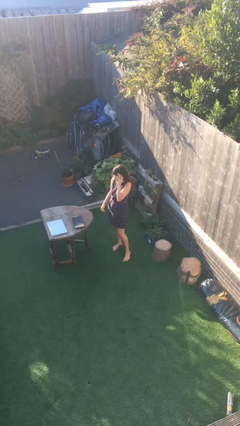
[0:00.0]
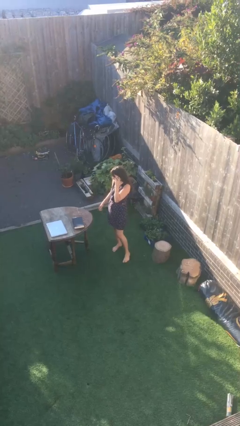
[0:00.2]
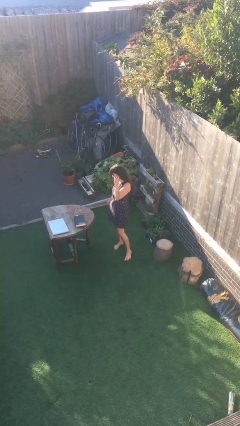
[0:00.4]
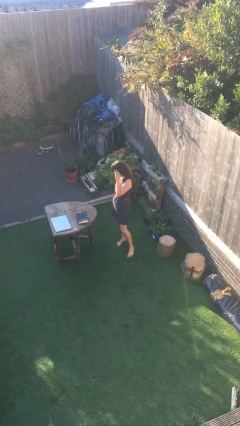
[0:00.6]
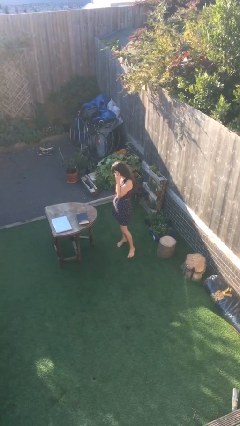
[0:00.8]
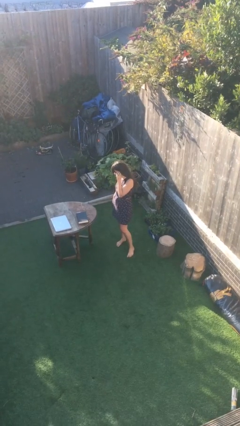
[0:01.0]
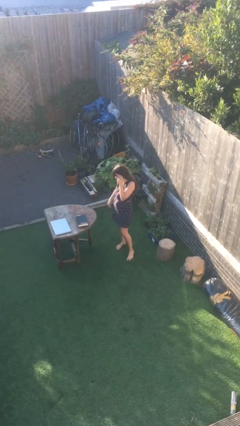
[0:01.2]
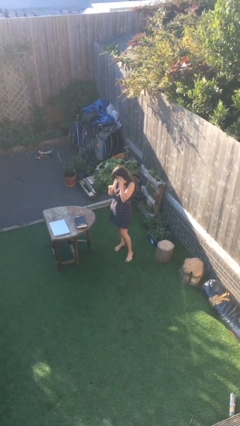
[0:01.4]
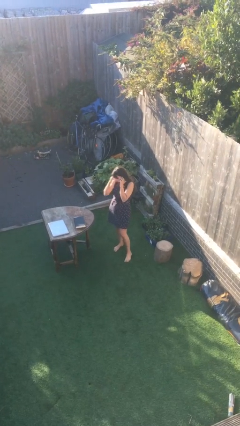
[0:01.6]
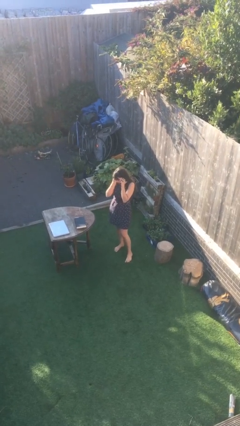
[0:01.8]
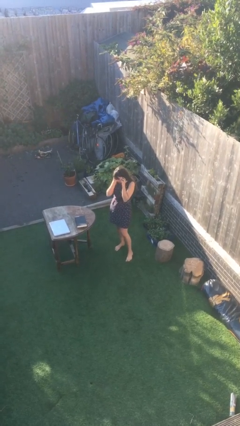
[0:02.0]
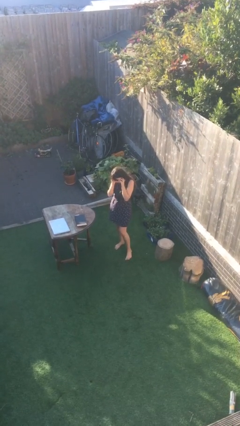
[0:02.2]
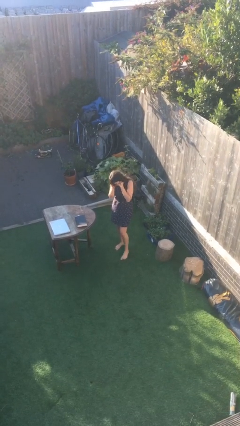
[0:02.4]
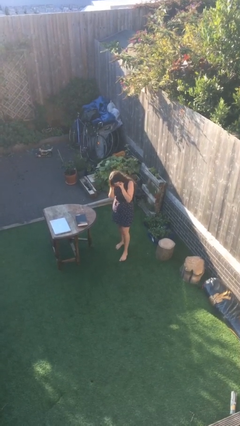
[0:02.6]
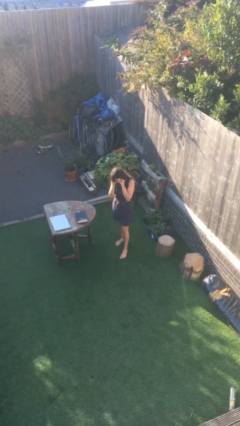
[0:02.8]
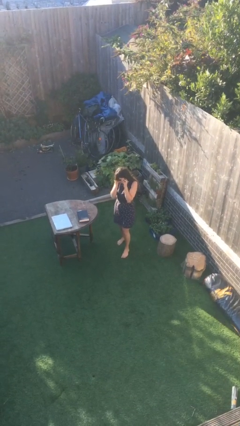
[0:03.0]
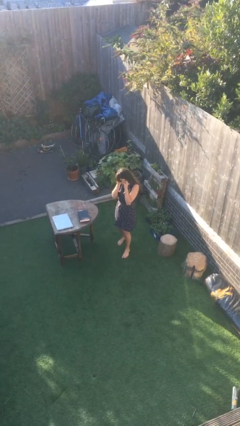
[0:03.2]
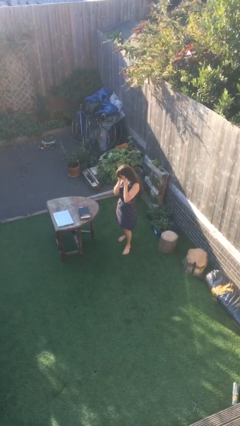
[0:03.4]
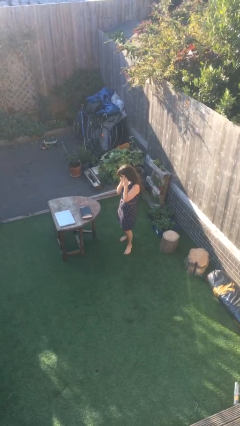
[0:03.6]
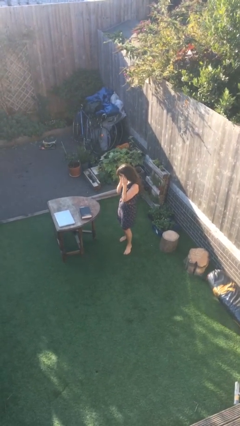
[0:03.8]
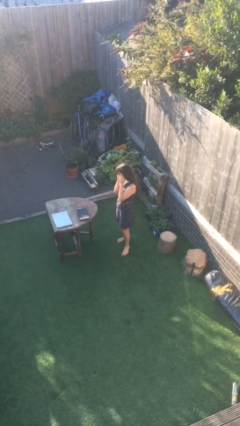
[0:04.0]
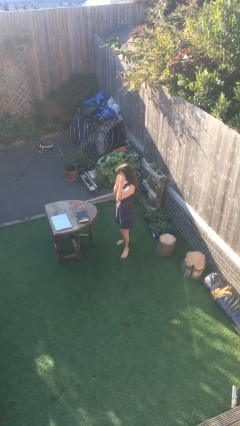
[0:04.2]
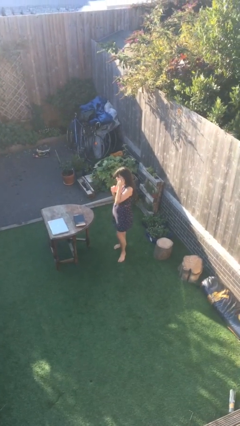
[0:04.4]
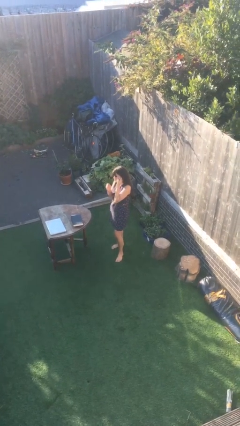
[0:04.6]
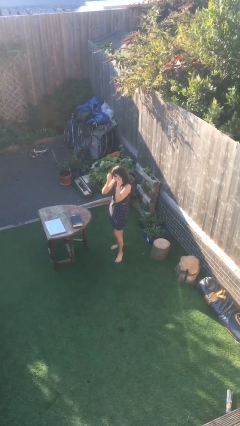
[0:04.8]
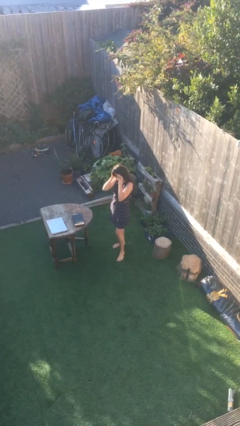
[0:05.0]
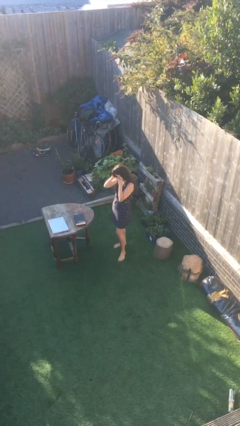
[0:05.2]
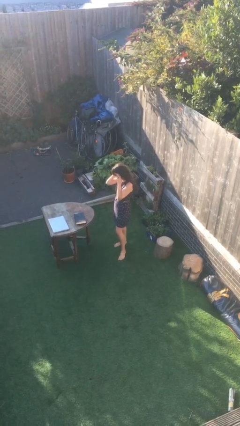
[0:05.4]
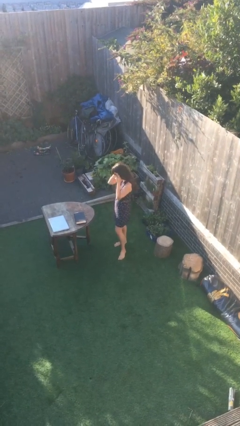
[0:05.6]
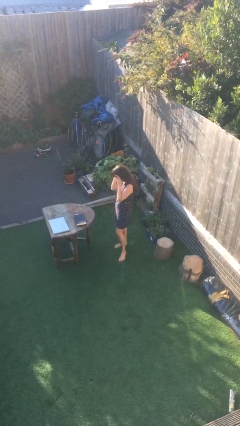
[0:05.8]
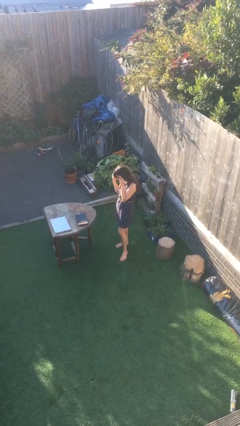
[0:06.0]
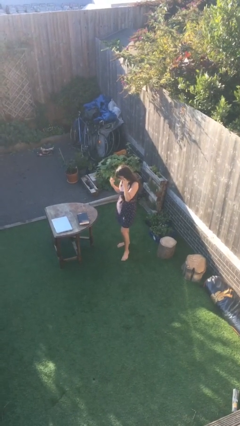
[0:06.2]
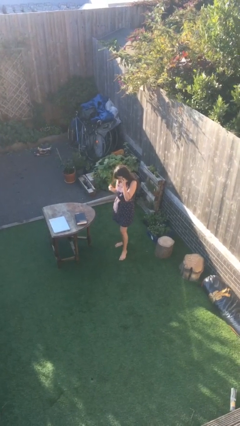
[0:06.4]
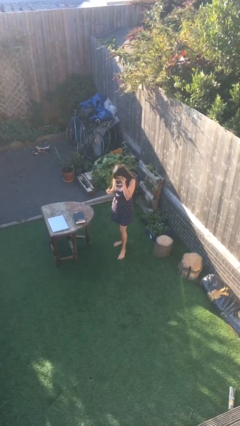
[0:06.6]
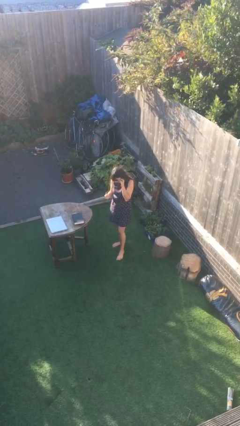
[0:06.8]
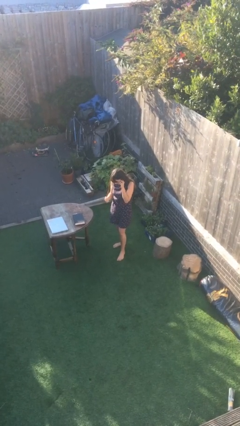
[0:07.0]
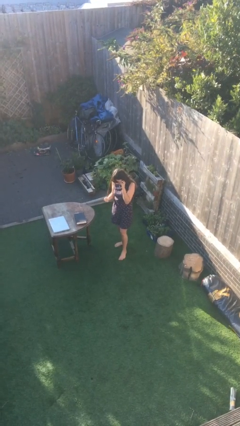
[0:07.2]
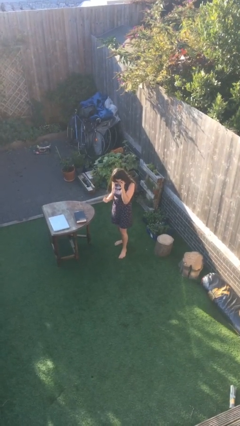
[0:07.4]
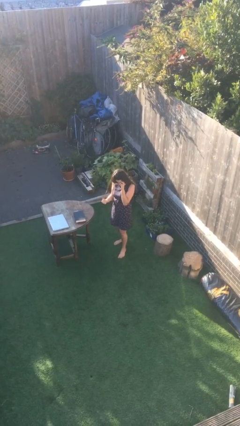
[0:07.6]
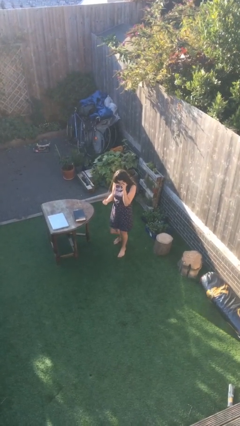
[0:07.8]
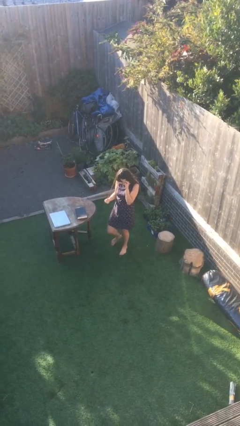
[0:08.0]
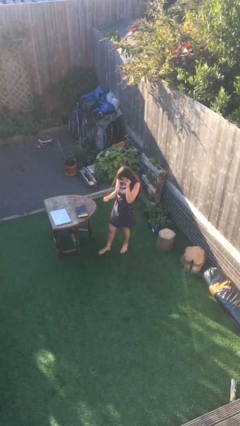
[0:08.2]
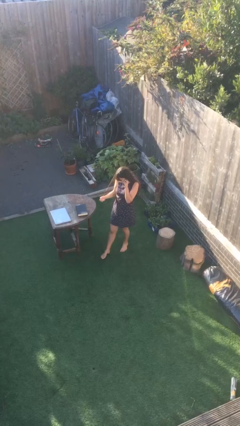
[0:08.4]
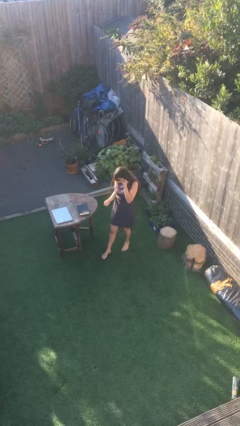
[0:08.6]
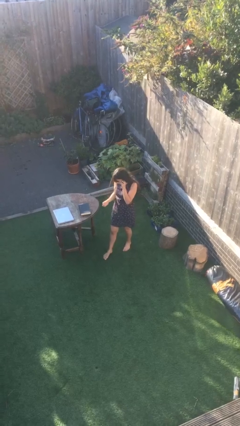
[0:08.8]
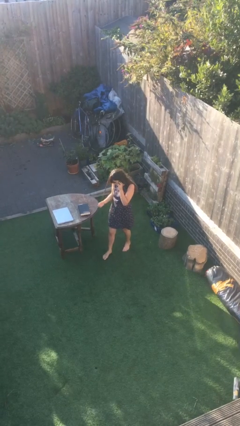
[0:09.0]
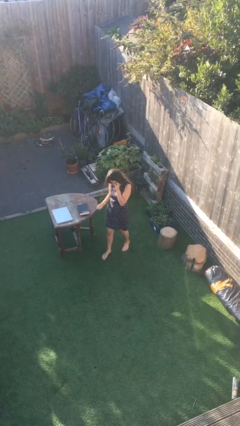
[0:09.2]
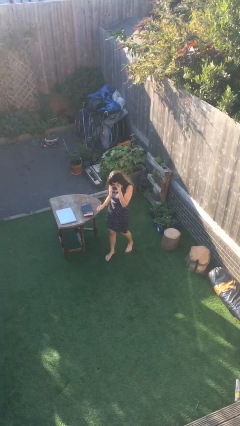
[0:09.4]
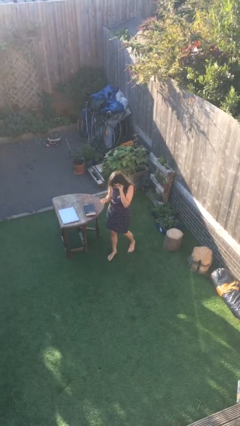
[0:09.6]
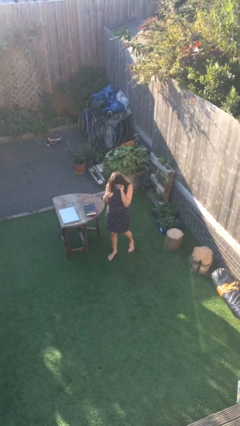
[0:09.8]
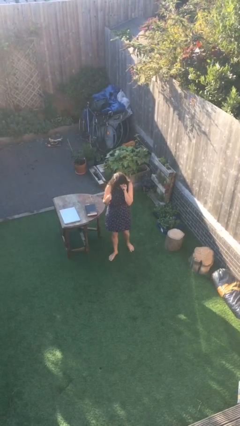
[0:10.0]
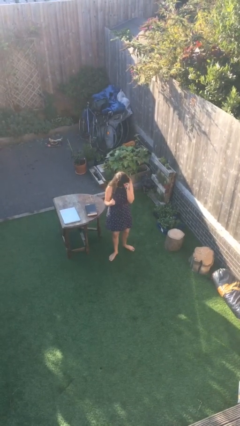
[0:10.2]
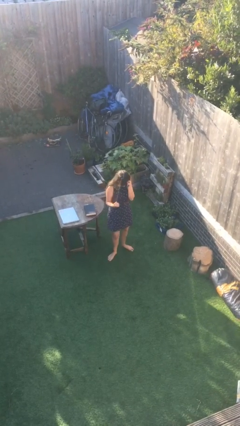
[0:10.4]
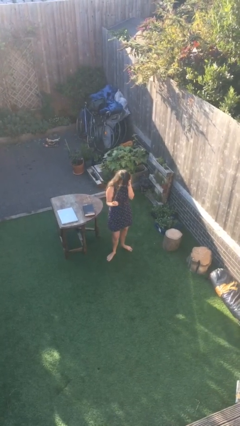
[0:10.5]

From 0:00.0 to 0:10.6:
person talks on phone

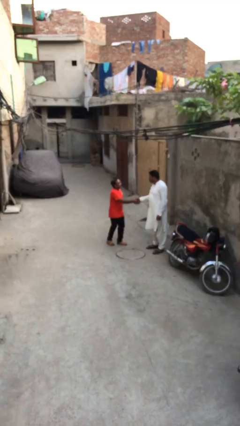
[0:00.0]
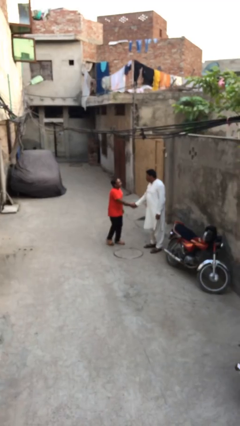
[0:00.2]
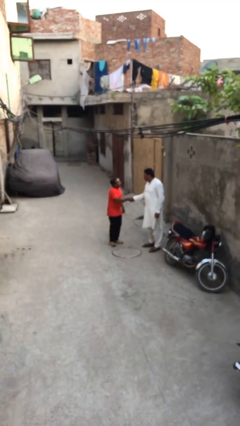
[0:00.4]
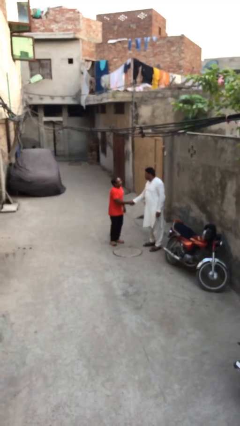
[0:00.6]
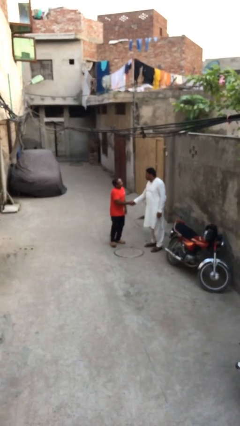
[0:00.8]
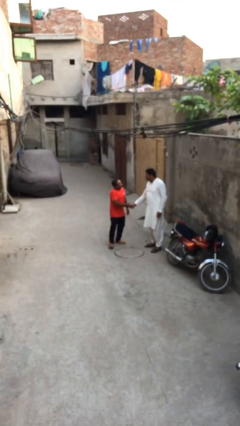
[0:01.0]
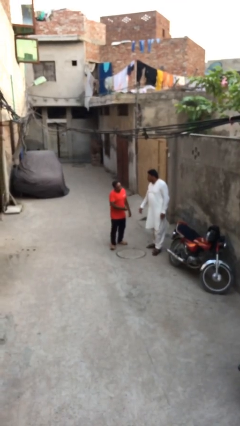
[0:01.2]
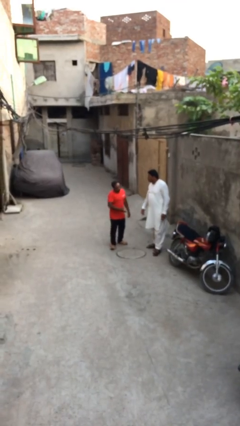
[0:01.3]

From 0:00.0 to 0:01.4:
person shakes hand

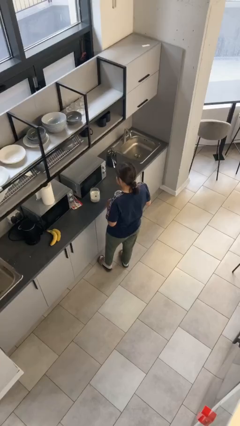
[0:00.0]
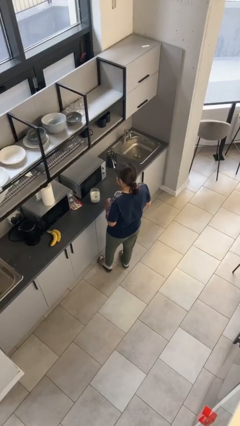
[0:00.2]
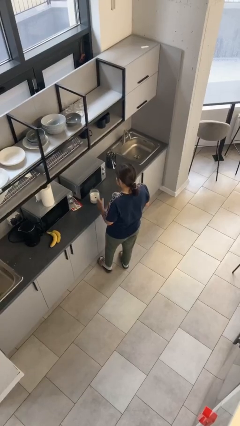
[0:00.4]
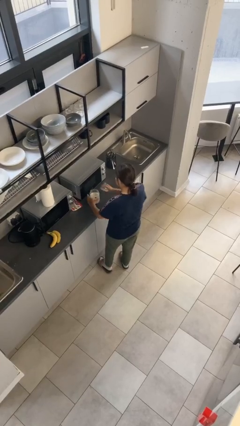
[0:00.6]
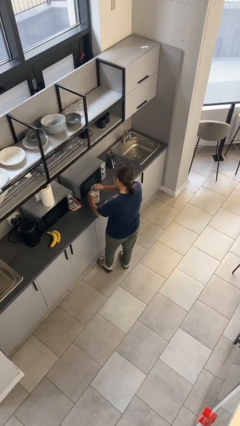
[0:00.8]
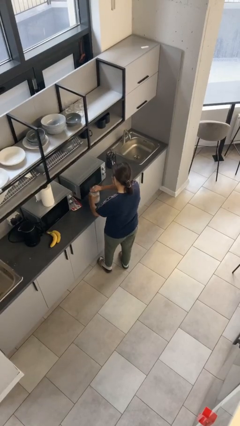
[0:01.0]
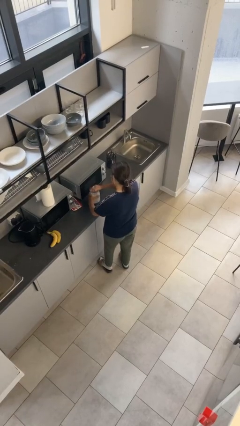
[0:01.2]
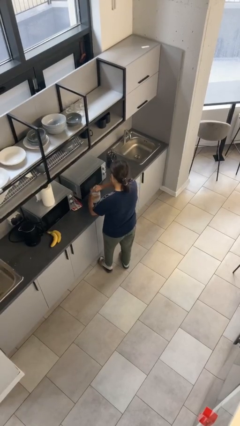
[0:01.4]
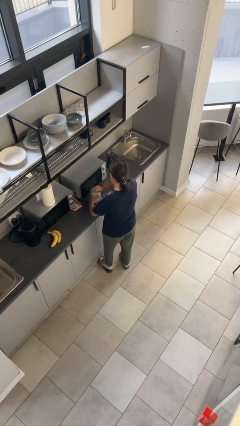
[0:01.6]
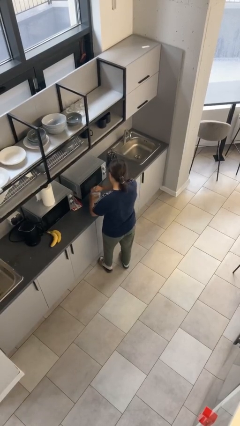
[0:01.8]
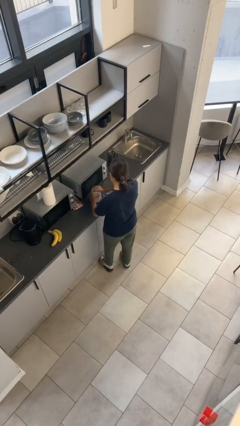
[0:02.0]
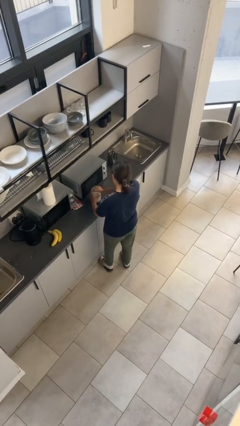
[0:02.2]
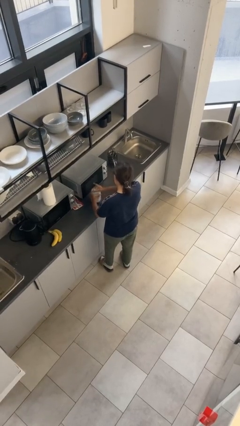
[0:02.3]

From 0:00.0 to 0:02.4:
person closes jar

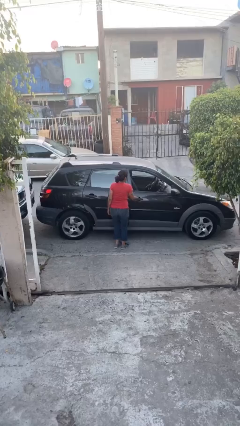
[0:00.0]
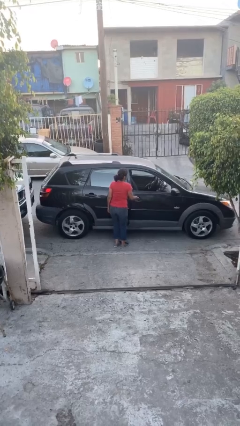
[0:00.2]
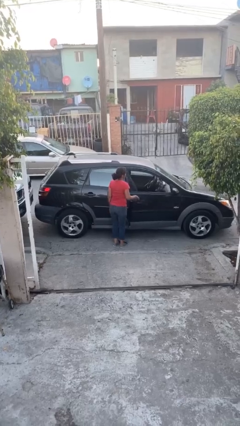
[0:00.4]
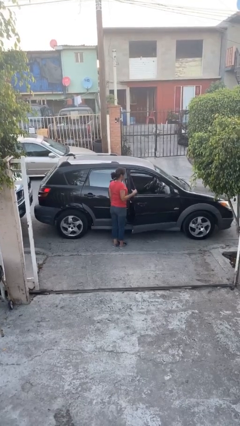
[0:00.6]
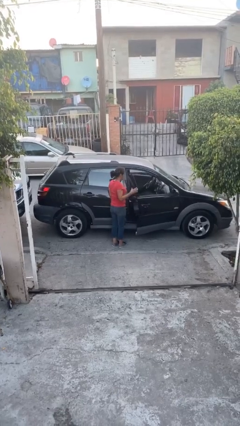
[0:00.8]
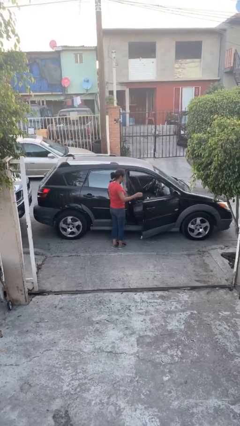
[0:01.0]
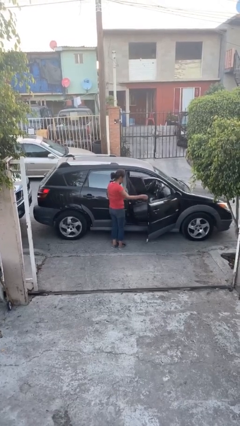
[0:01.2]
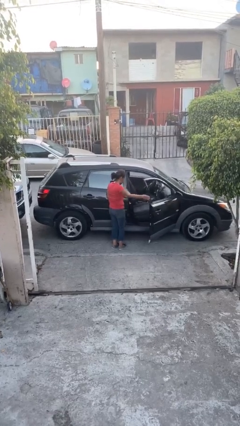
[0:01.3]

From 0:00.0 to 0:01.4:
person opens car door

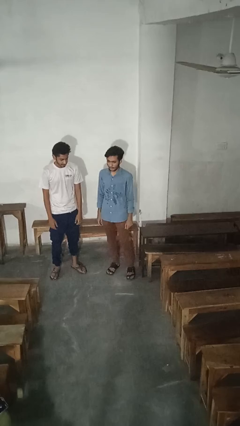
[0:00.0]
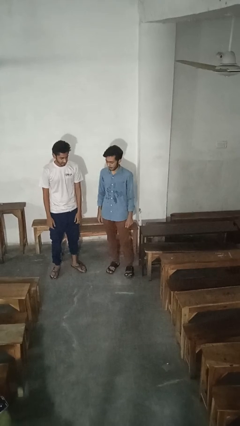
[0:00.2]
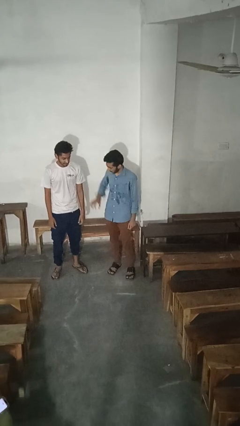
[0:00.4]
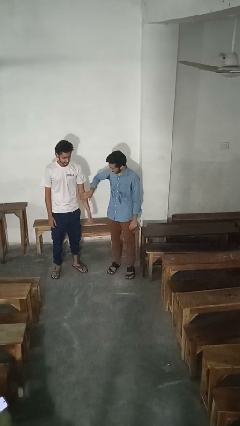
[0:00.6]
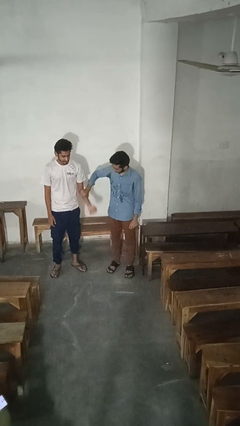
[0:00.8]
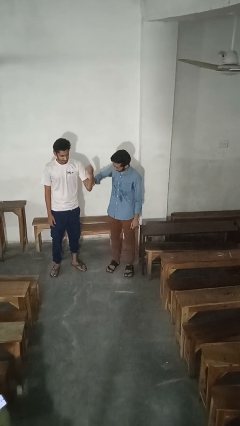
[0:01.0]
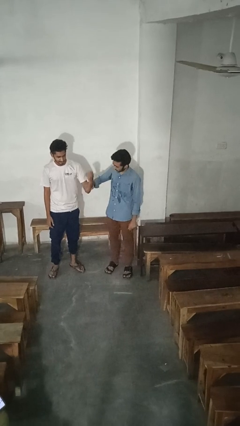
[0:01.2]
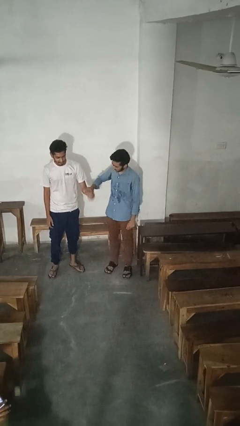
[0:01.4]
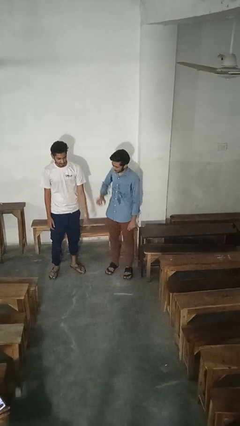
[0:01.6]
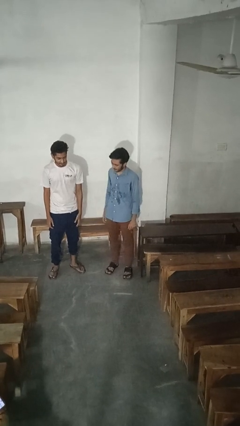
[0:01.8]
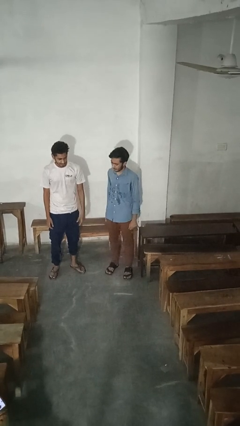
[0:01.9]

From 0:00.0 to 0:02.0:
person grabs person by forearm
